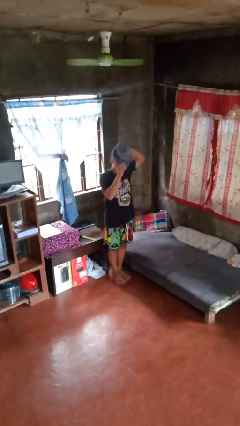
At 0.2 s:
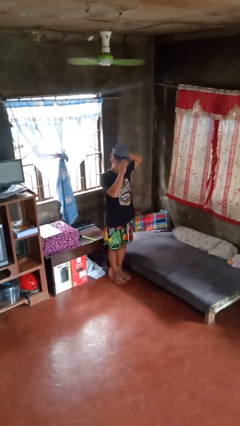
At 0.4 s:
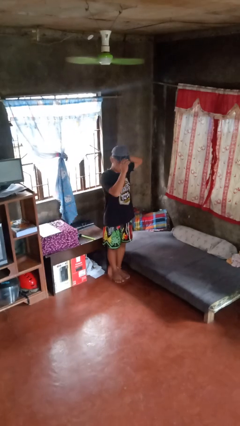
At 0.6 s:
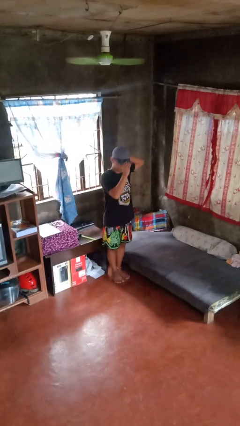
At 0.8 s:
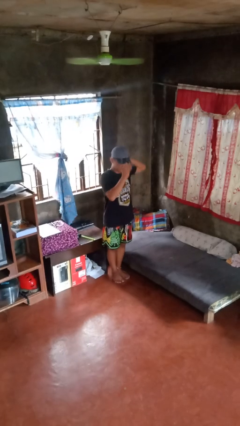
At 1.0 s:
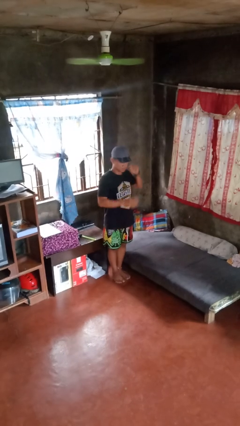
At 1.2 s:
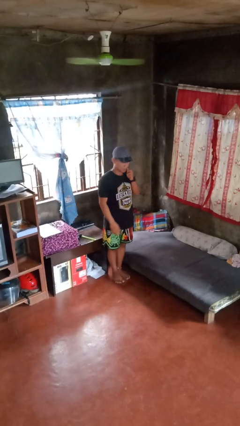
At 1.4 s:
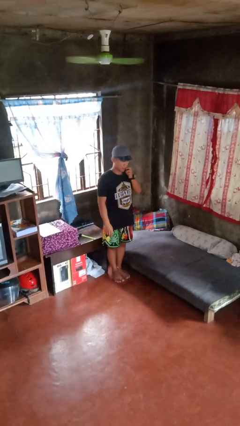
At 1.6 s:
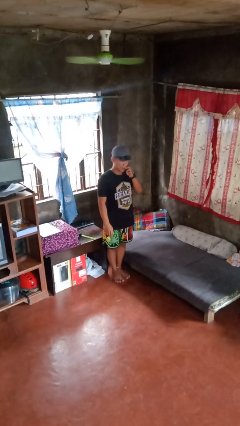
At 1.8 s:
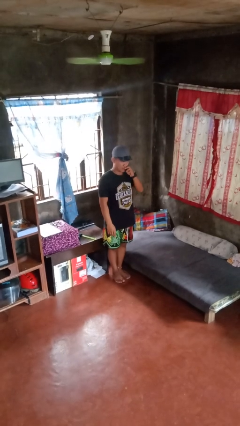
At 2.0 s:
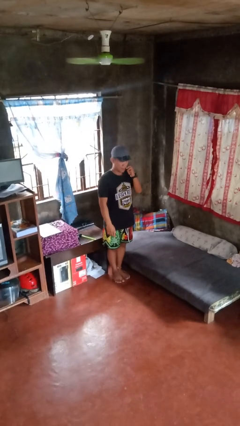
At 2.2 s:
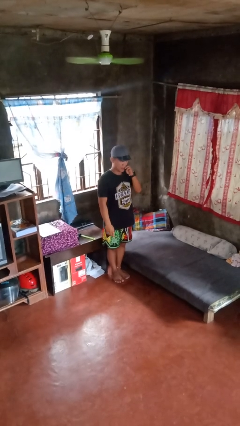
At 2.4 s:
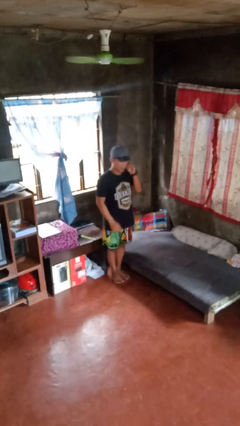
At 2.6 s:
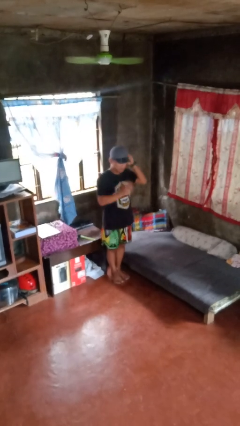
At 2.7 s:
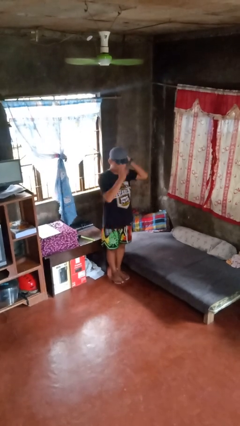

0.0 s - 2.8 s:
person puts on hat

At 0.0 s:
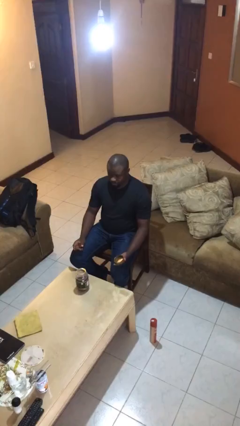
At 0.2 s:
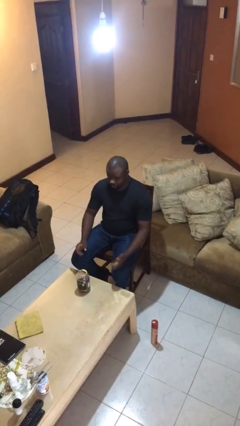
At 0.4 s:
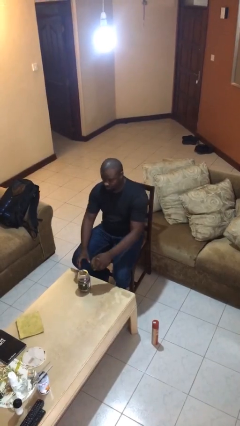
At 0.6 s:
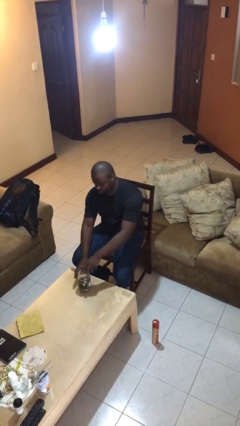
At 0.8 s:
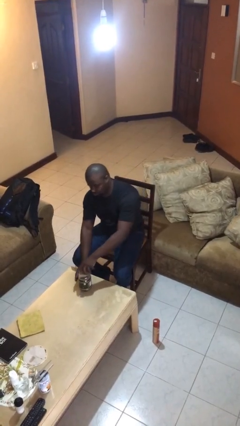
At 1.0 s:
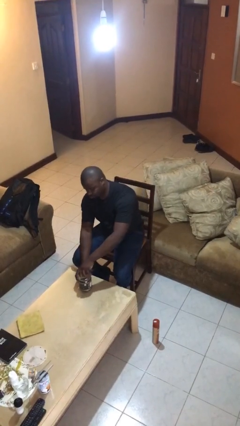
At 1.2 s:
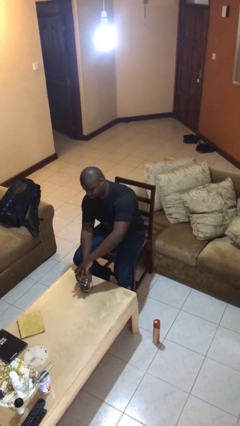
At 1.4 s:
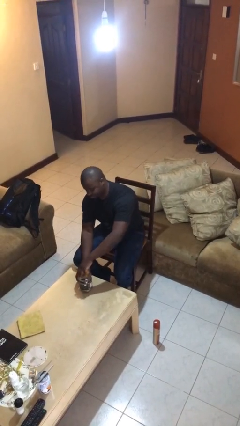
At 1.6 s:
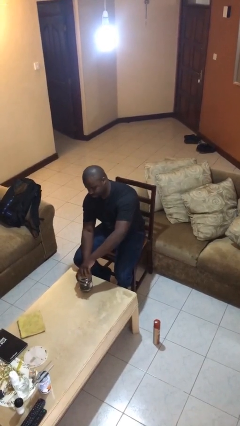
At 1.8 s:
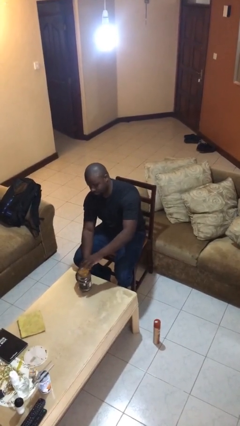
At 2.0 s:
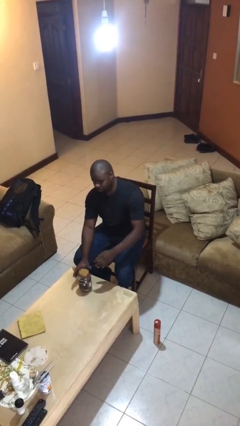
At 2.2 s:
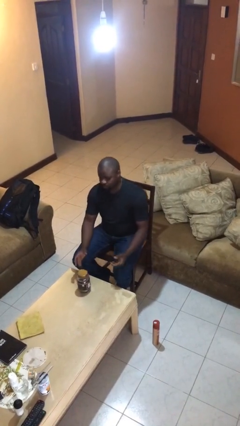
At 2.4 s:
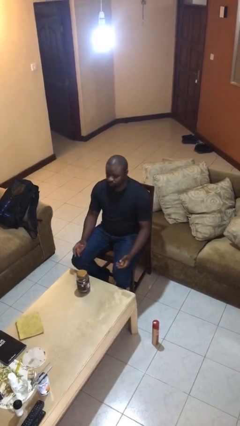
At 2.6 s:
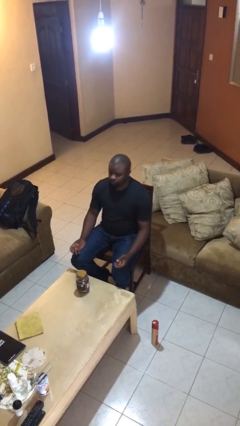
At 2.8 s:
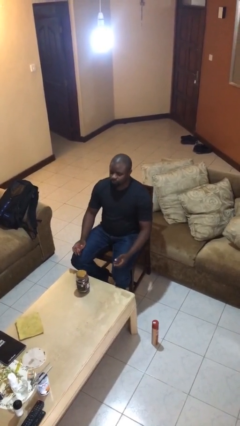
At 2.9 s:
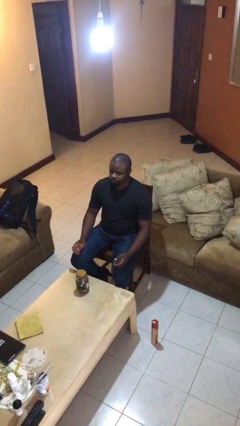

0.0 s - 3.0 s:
person closes jar

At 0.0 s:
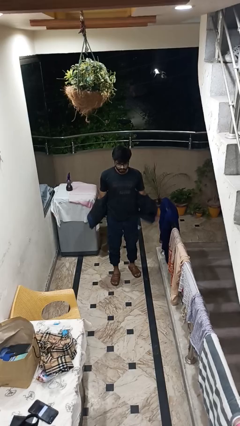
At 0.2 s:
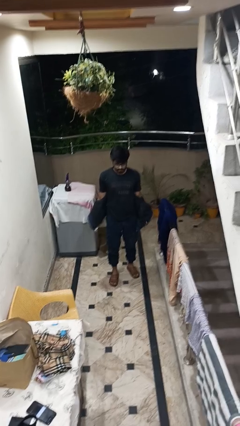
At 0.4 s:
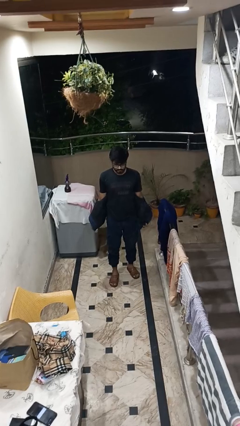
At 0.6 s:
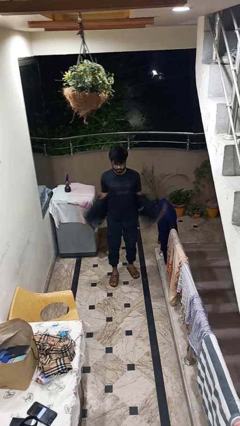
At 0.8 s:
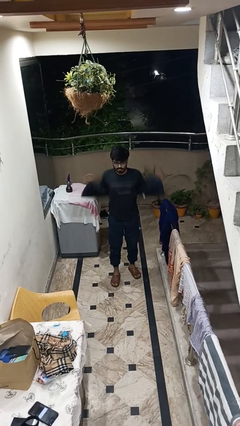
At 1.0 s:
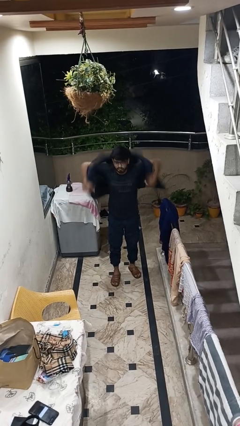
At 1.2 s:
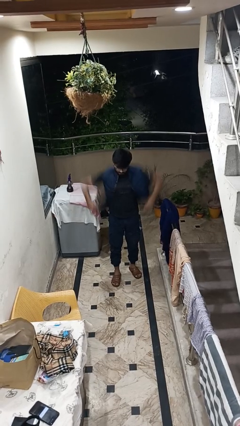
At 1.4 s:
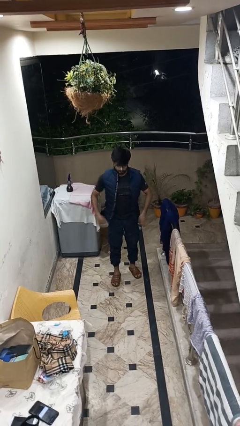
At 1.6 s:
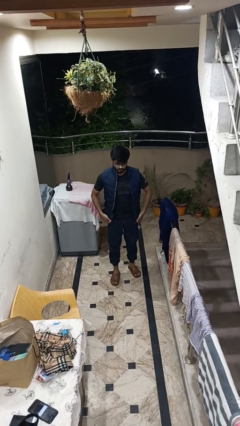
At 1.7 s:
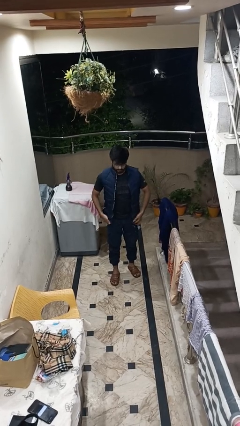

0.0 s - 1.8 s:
person puts on jacket

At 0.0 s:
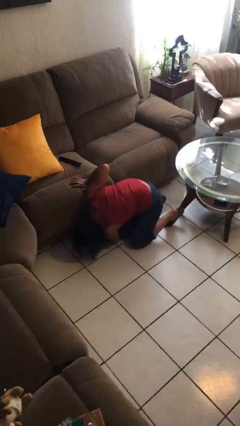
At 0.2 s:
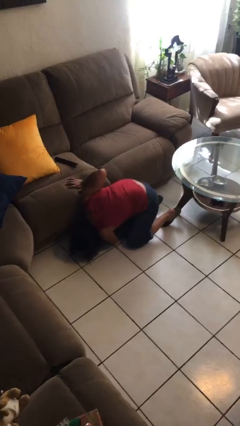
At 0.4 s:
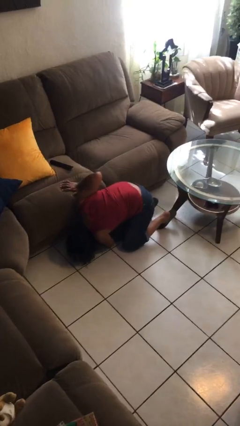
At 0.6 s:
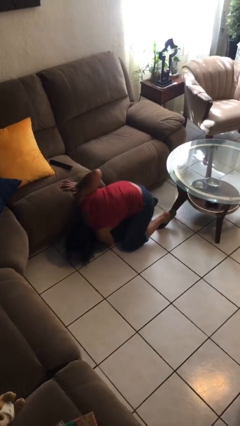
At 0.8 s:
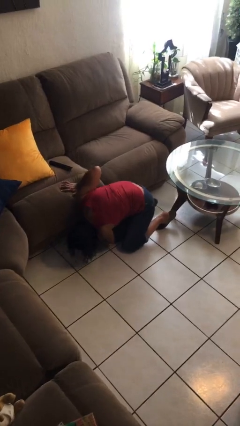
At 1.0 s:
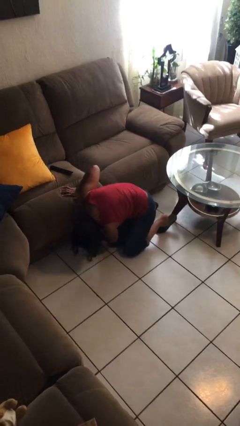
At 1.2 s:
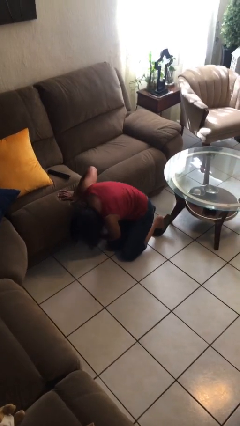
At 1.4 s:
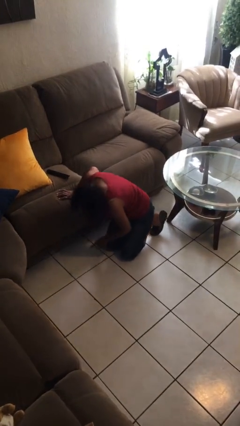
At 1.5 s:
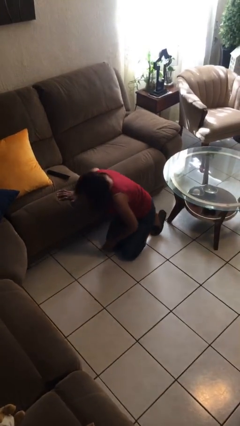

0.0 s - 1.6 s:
person searches under couch

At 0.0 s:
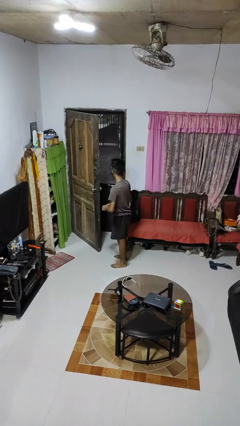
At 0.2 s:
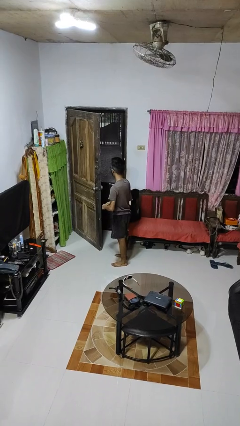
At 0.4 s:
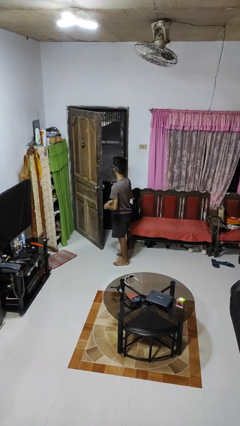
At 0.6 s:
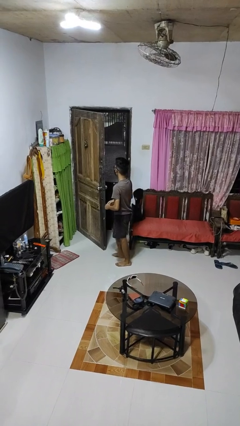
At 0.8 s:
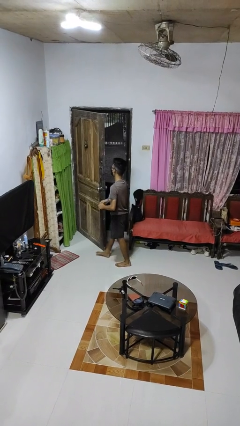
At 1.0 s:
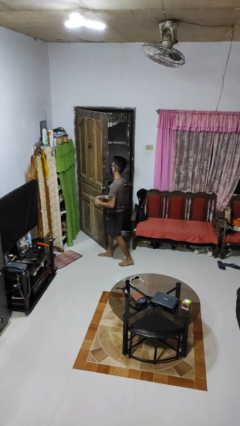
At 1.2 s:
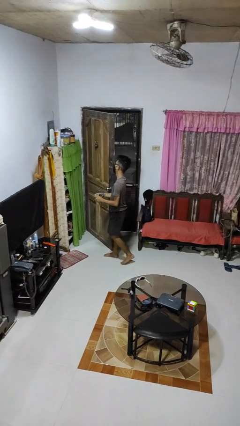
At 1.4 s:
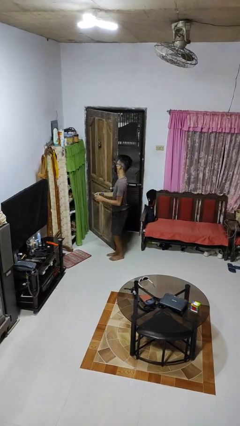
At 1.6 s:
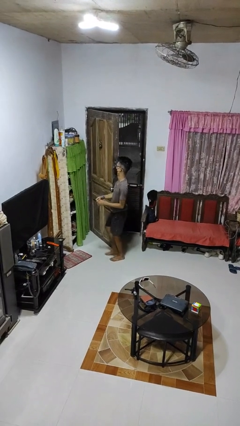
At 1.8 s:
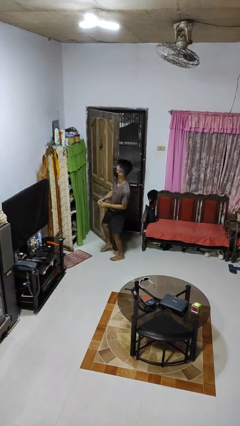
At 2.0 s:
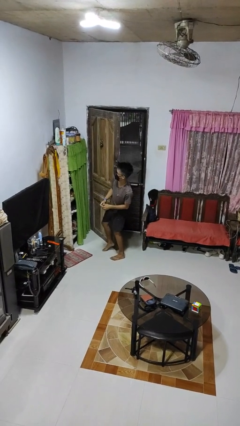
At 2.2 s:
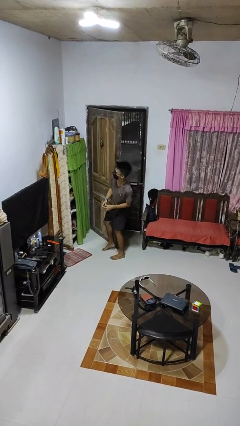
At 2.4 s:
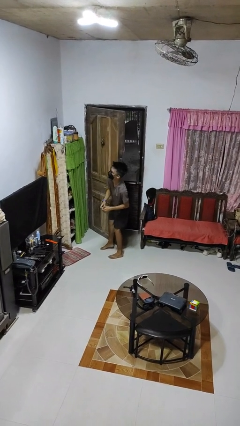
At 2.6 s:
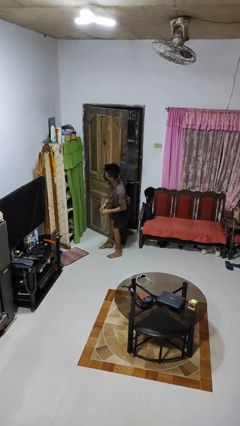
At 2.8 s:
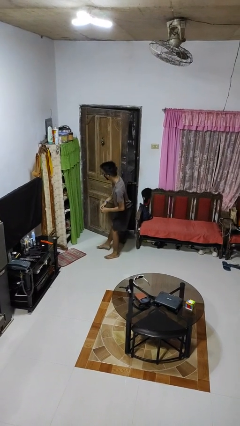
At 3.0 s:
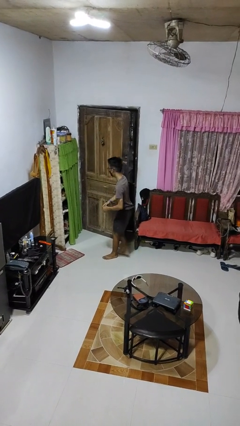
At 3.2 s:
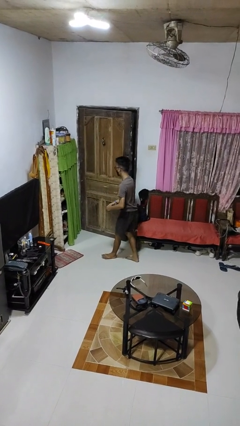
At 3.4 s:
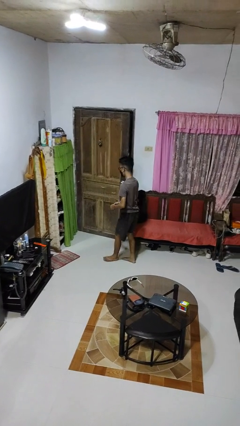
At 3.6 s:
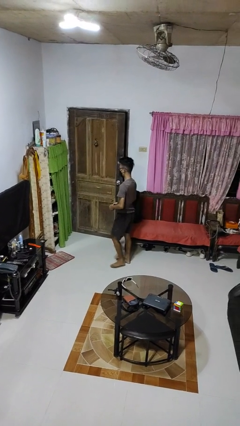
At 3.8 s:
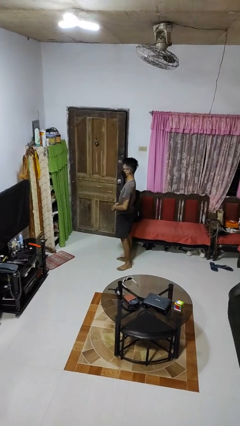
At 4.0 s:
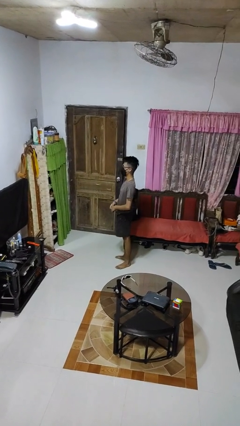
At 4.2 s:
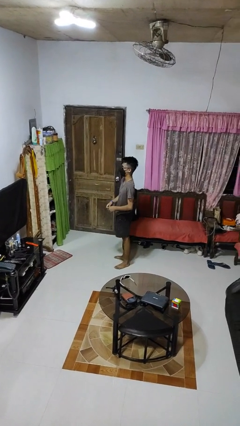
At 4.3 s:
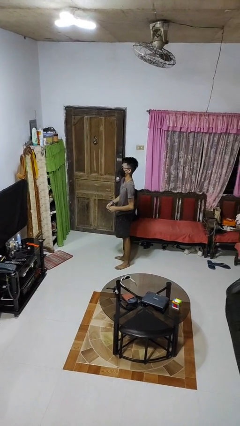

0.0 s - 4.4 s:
person closes door with hip

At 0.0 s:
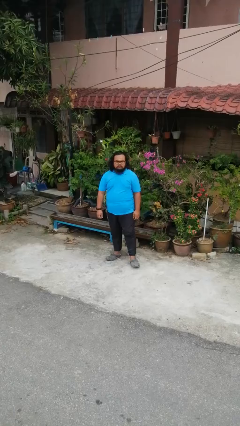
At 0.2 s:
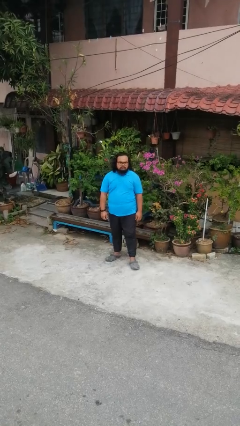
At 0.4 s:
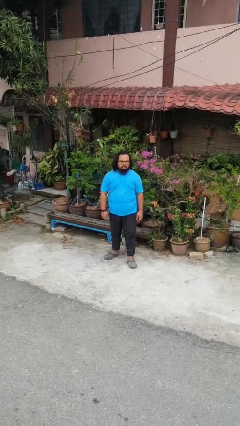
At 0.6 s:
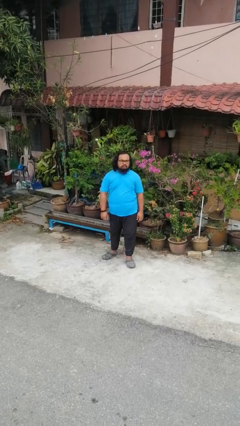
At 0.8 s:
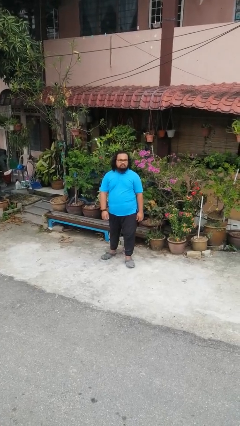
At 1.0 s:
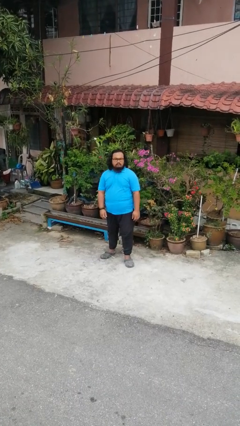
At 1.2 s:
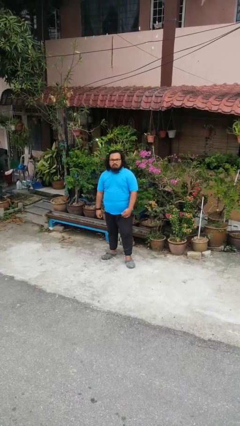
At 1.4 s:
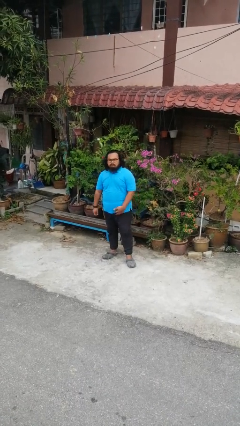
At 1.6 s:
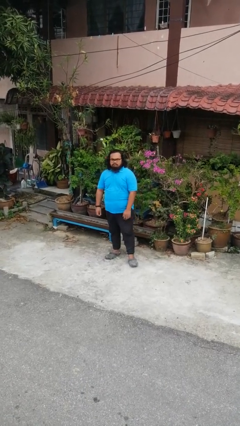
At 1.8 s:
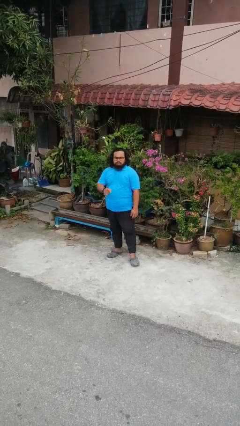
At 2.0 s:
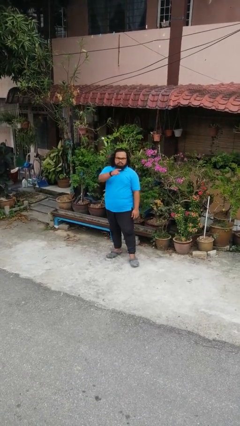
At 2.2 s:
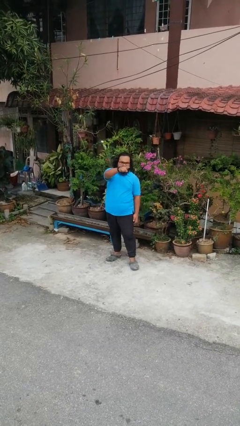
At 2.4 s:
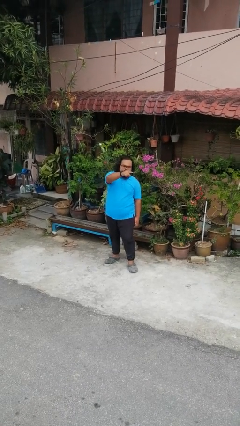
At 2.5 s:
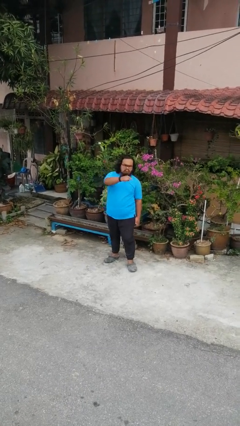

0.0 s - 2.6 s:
person points at person

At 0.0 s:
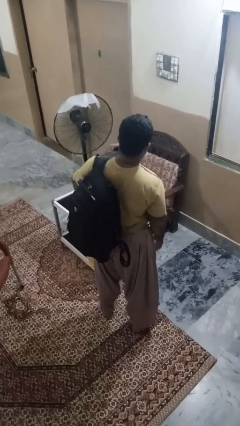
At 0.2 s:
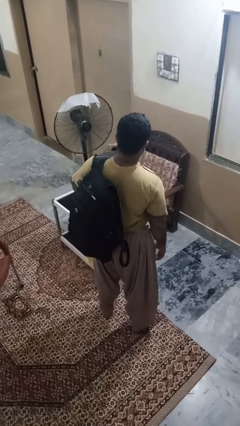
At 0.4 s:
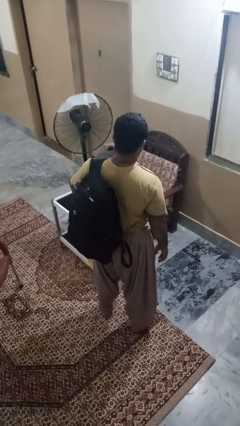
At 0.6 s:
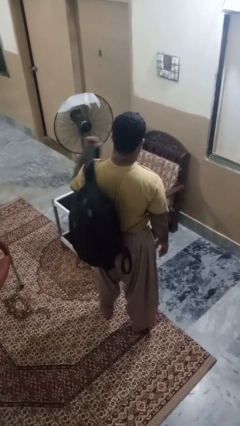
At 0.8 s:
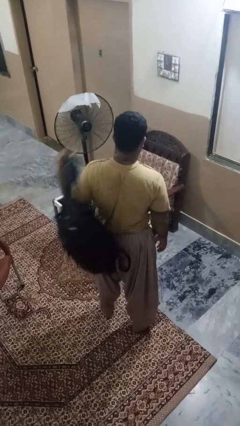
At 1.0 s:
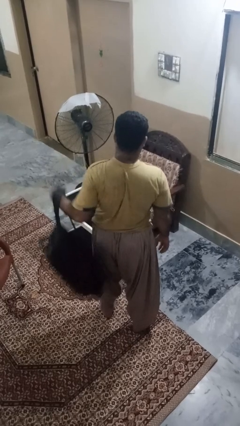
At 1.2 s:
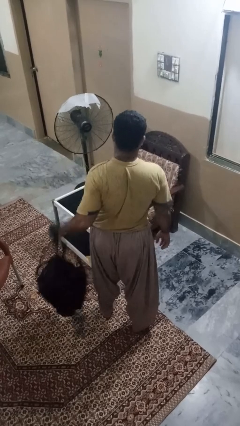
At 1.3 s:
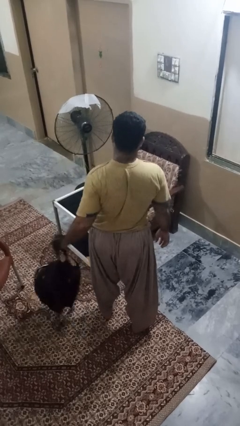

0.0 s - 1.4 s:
person takes off backpack
